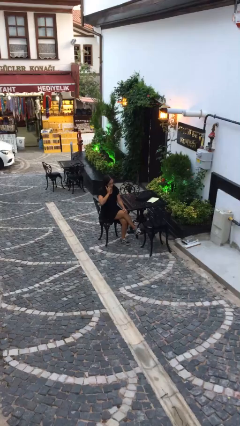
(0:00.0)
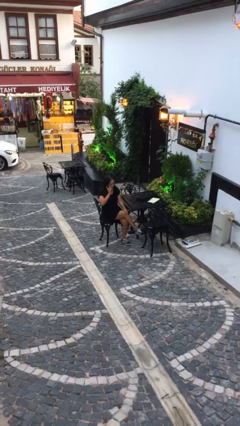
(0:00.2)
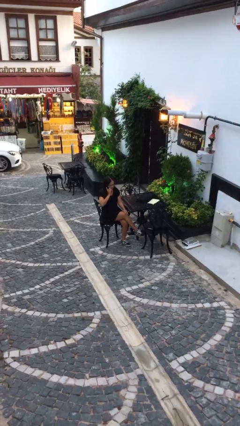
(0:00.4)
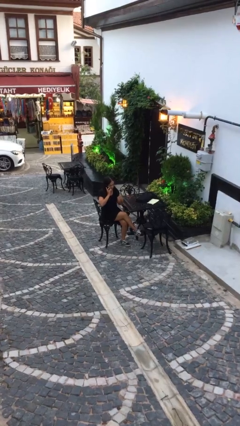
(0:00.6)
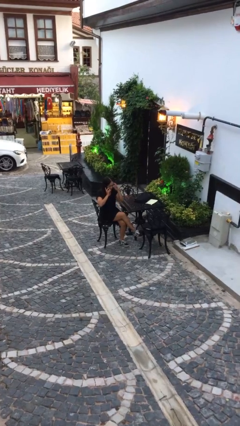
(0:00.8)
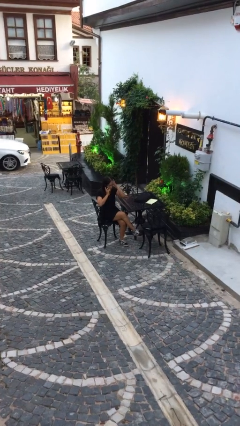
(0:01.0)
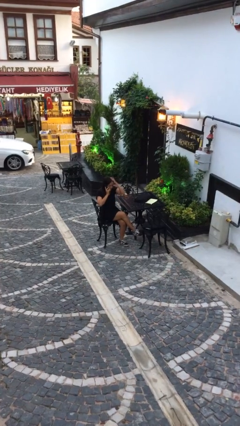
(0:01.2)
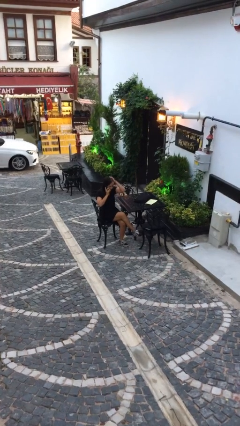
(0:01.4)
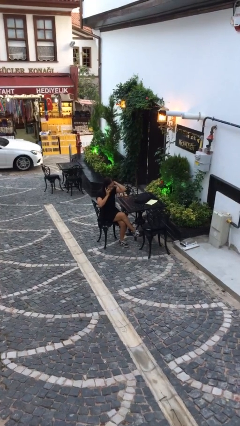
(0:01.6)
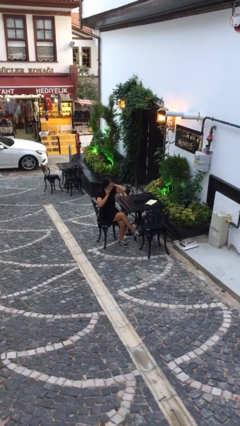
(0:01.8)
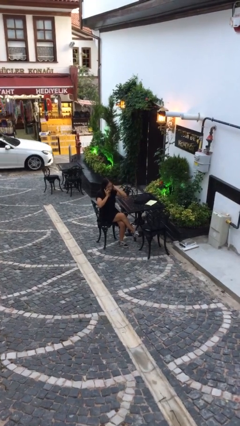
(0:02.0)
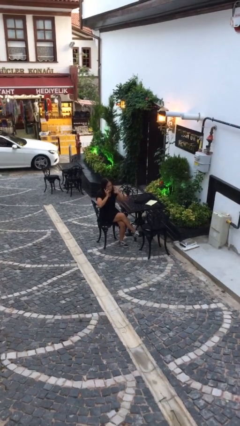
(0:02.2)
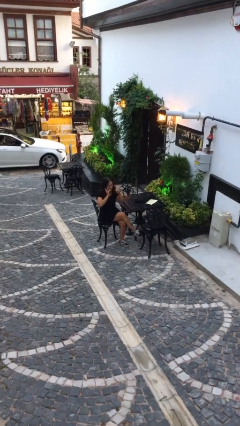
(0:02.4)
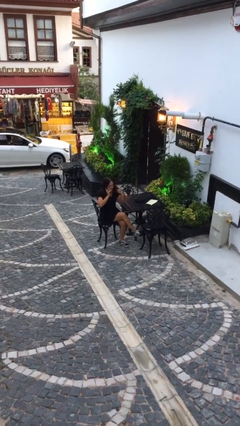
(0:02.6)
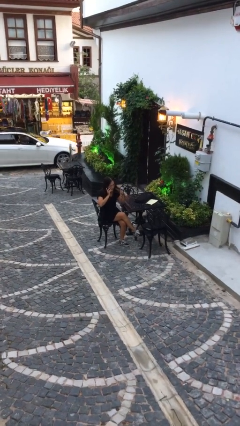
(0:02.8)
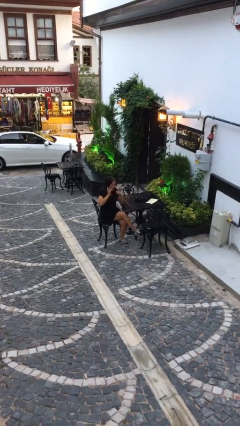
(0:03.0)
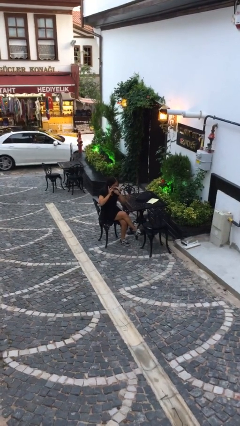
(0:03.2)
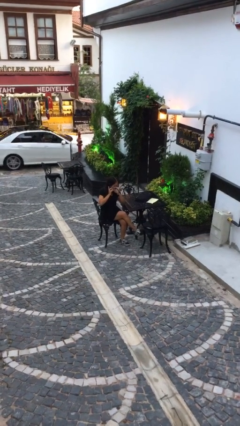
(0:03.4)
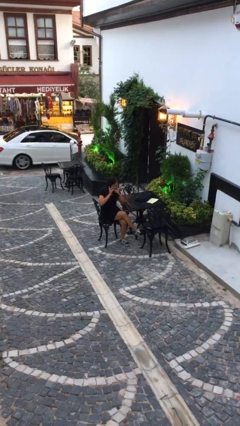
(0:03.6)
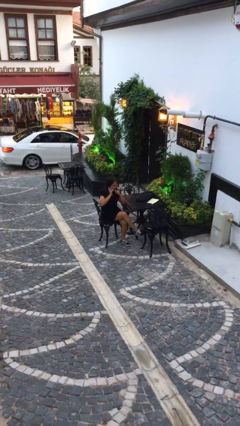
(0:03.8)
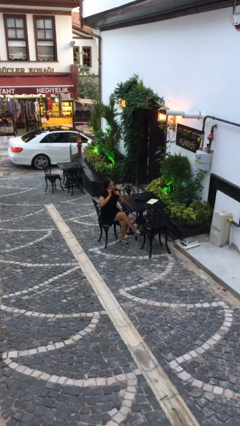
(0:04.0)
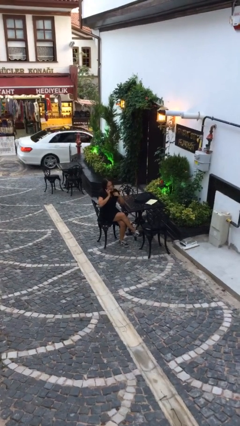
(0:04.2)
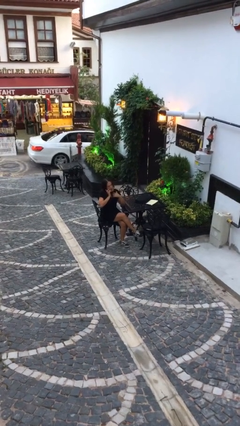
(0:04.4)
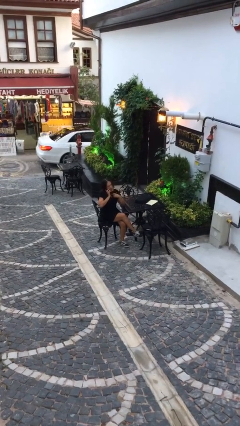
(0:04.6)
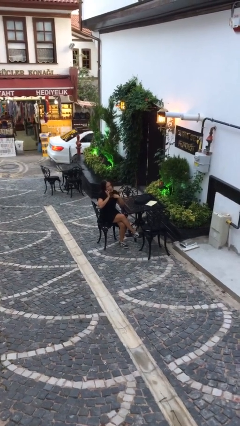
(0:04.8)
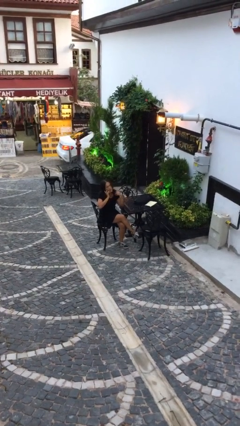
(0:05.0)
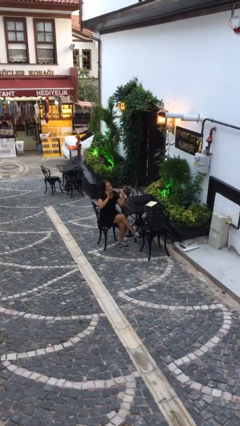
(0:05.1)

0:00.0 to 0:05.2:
person talks on phone

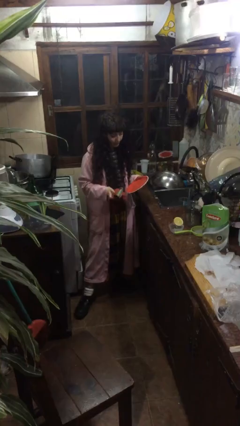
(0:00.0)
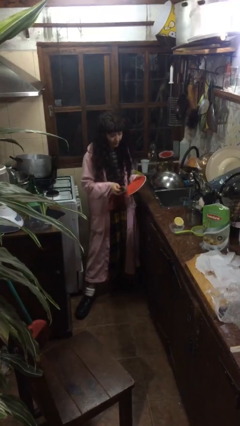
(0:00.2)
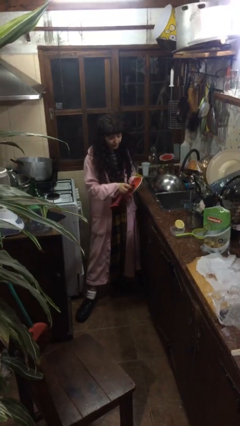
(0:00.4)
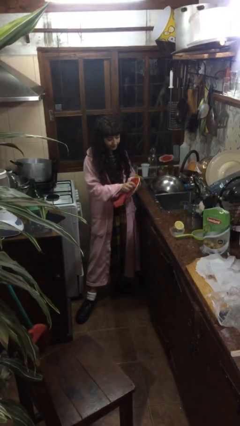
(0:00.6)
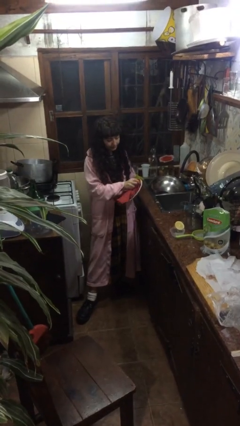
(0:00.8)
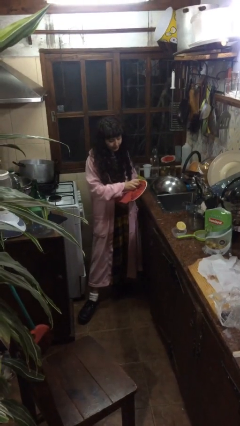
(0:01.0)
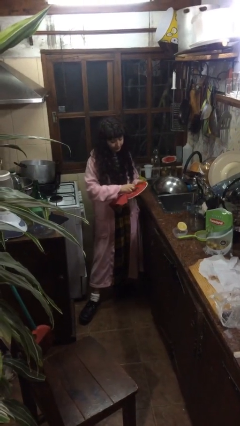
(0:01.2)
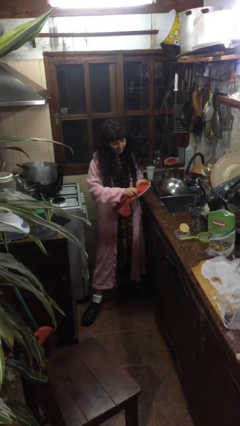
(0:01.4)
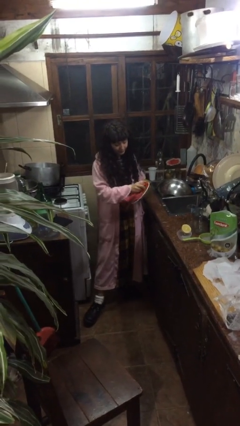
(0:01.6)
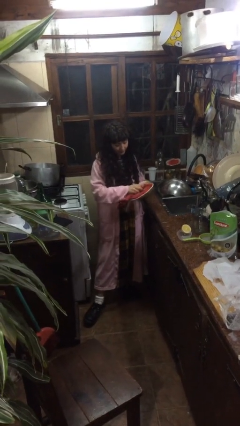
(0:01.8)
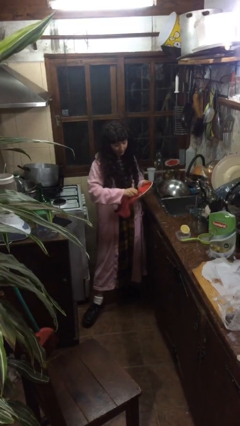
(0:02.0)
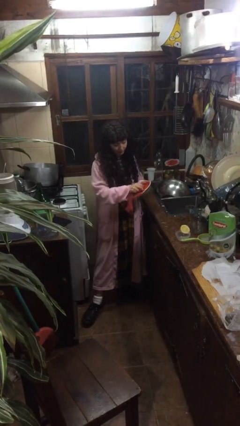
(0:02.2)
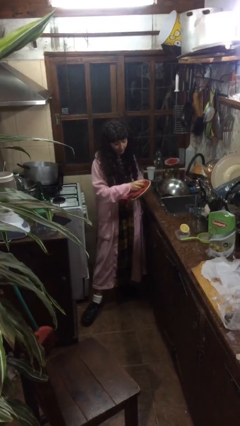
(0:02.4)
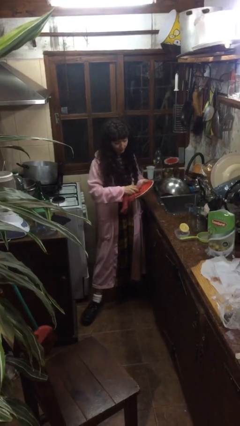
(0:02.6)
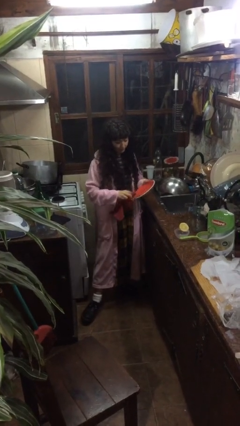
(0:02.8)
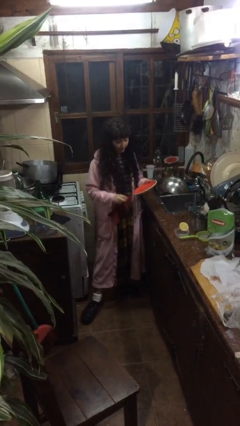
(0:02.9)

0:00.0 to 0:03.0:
person dries dish

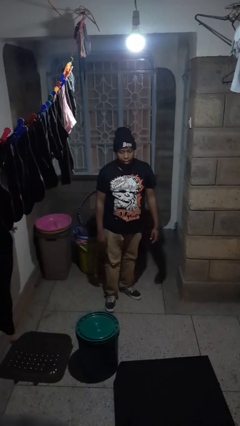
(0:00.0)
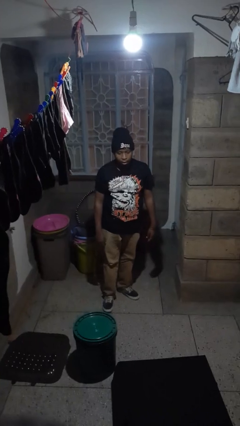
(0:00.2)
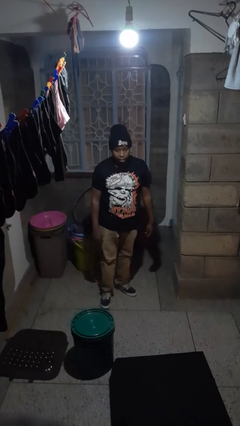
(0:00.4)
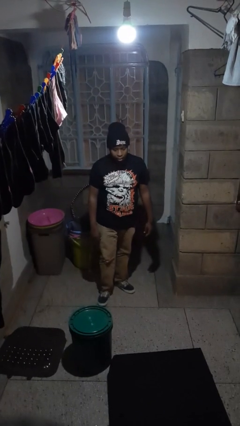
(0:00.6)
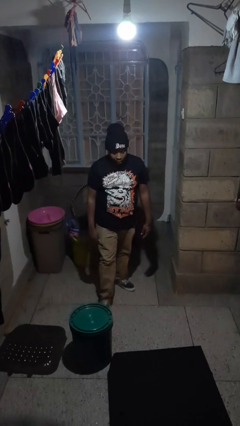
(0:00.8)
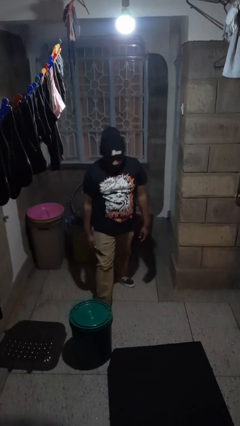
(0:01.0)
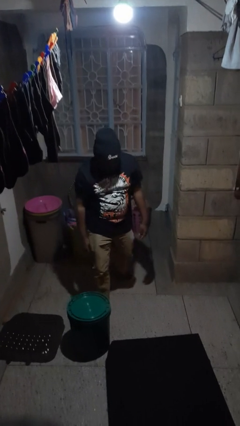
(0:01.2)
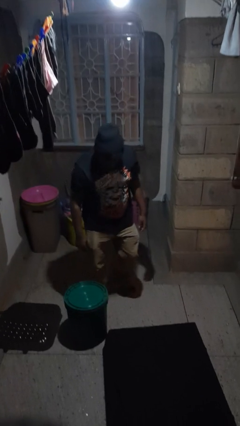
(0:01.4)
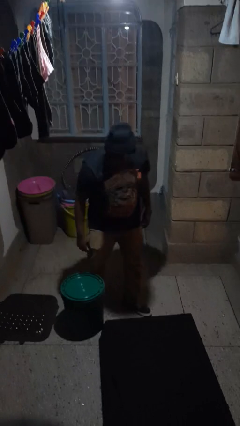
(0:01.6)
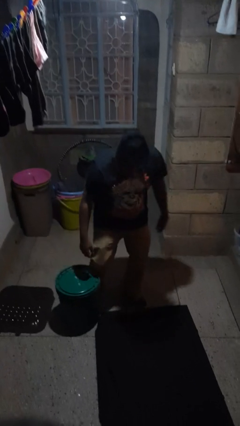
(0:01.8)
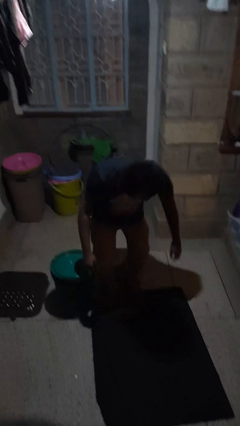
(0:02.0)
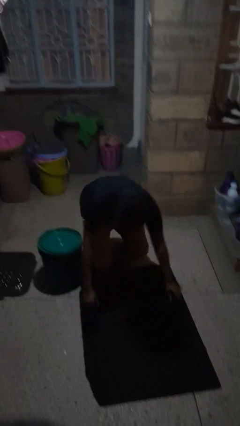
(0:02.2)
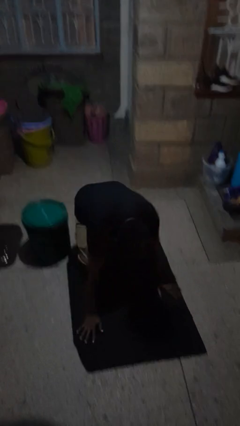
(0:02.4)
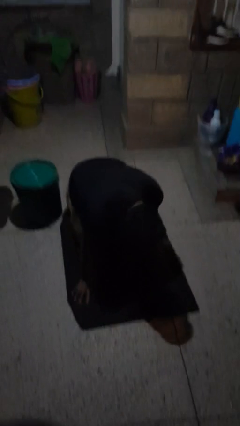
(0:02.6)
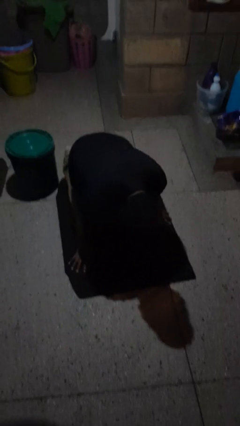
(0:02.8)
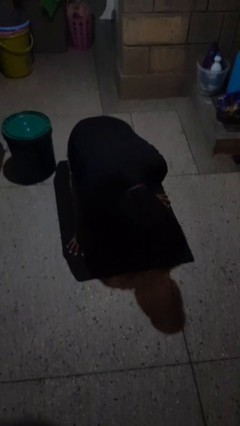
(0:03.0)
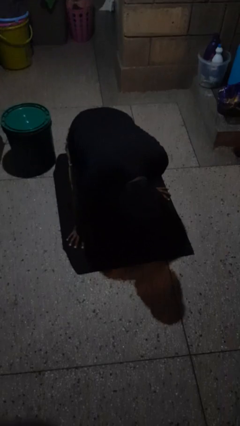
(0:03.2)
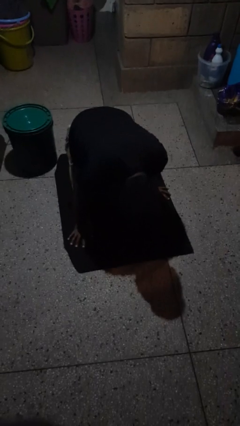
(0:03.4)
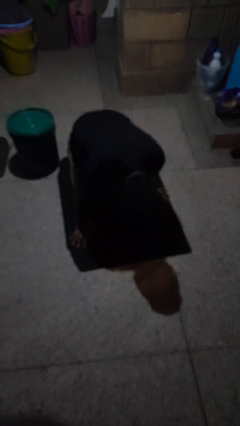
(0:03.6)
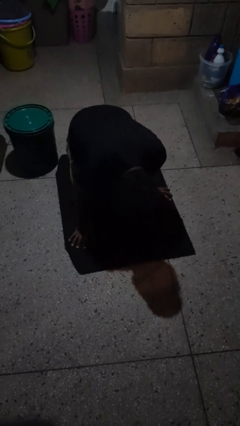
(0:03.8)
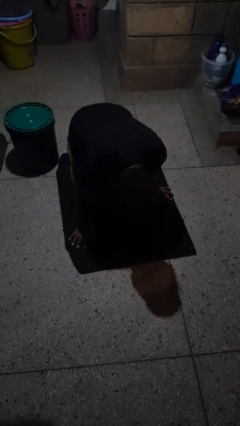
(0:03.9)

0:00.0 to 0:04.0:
person trips on object on floor

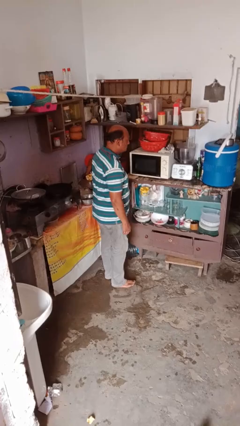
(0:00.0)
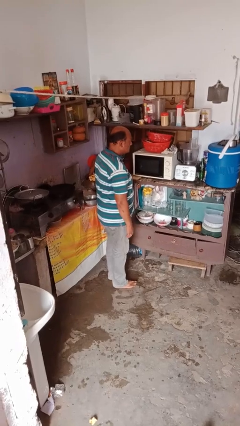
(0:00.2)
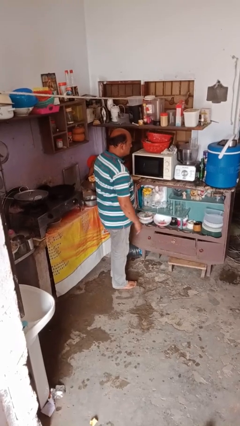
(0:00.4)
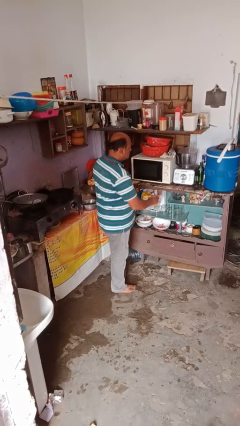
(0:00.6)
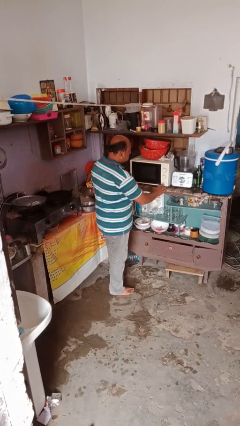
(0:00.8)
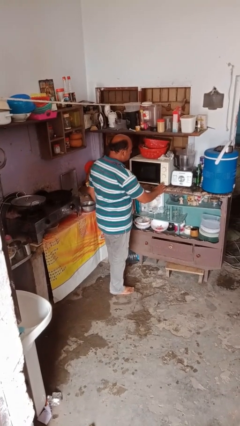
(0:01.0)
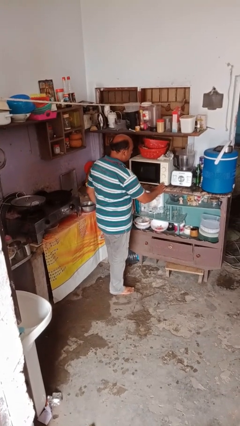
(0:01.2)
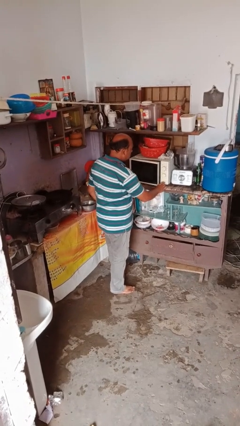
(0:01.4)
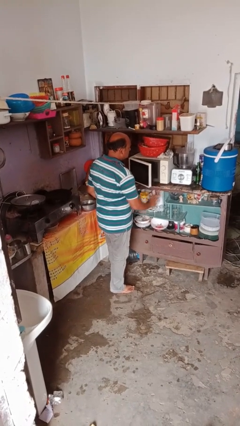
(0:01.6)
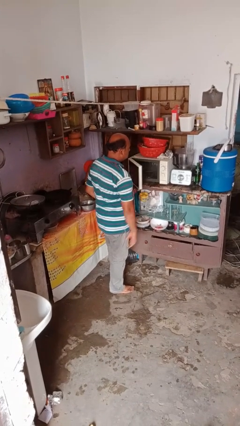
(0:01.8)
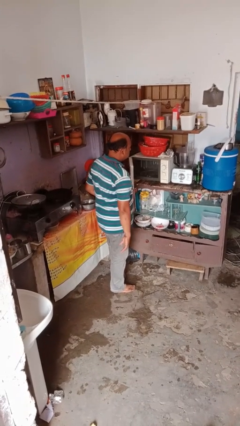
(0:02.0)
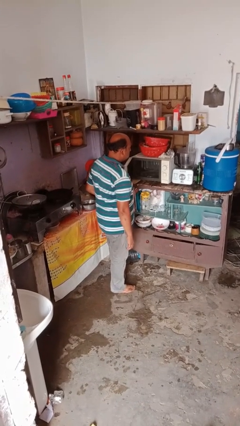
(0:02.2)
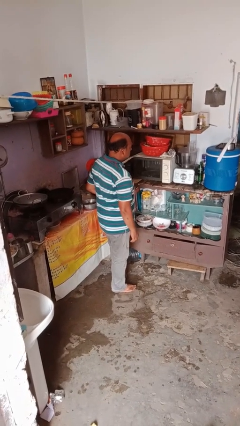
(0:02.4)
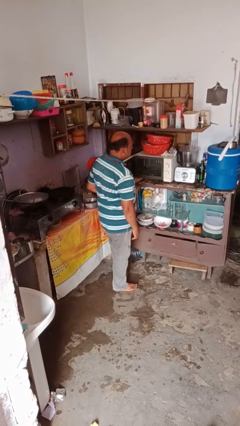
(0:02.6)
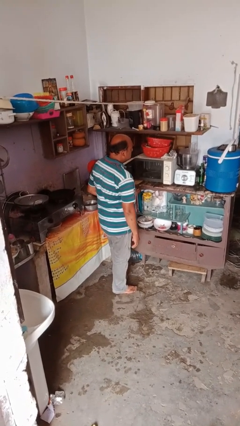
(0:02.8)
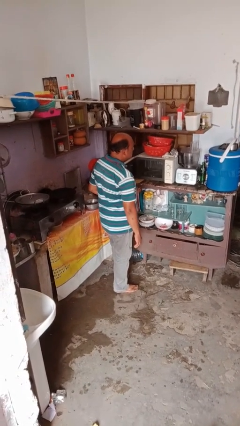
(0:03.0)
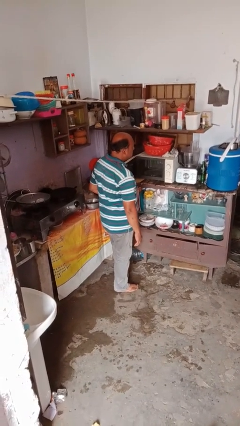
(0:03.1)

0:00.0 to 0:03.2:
person opens microwave

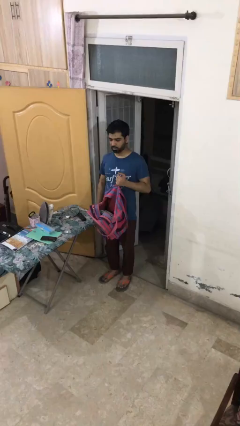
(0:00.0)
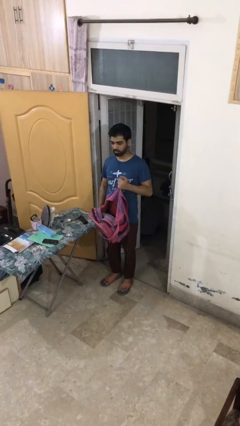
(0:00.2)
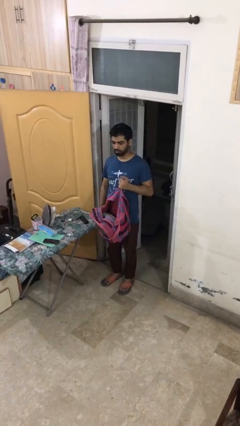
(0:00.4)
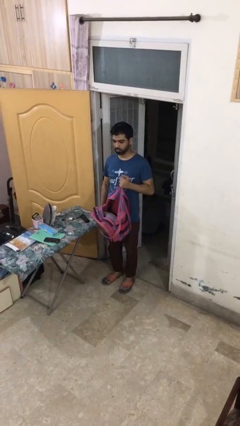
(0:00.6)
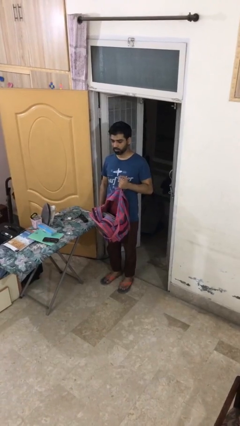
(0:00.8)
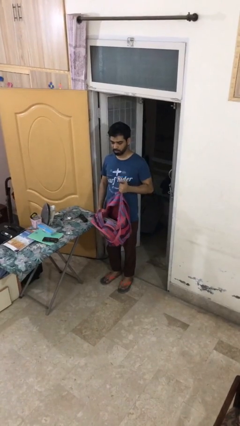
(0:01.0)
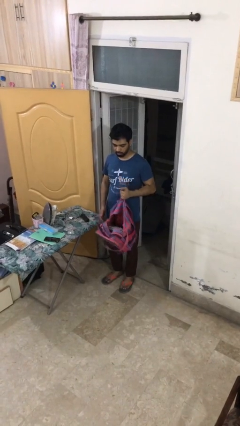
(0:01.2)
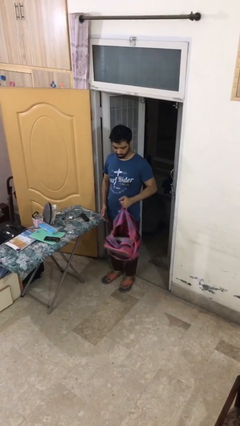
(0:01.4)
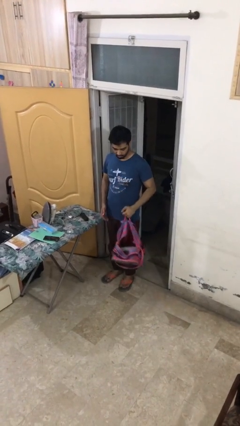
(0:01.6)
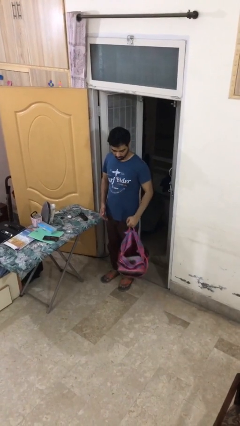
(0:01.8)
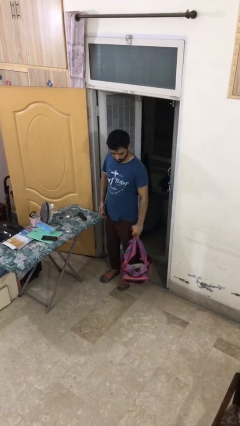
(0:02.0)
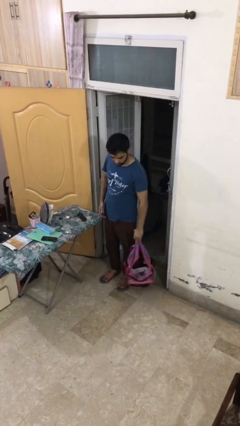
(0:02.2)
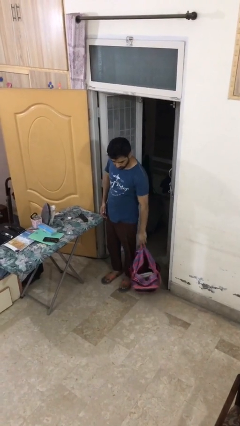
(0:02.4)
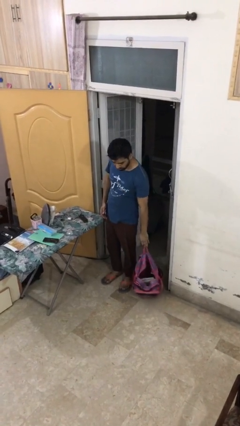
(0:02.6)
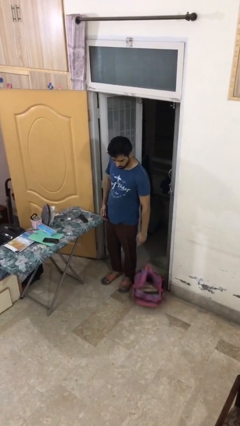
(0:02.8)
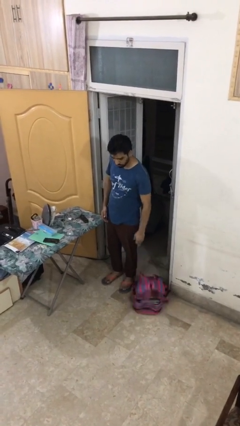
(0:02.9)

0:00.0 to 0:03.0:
person puts down object on floor
